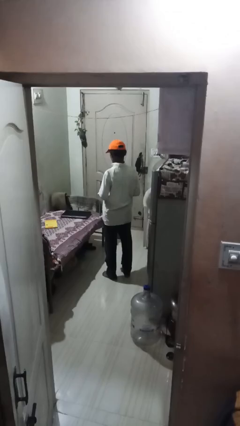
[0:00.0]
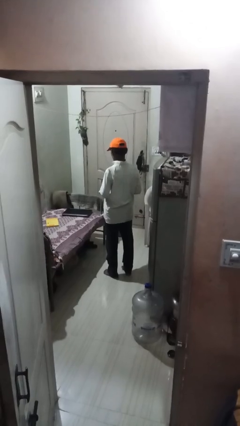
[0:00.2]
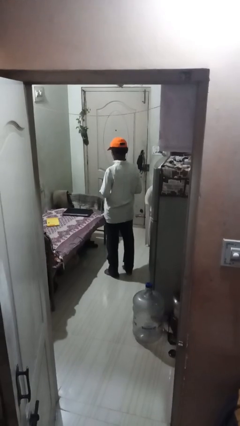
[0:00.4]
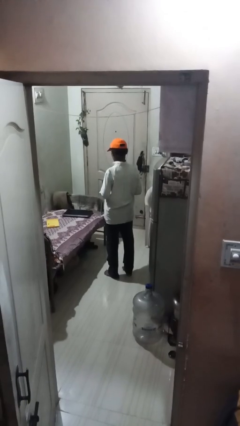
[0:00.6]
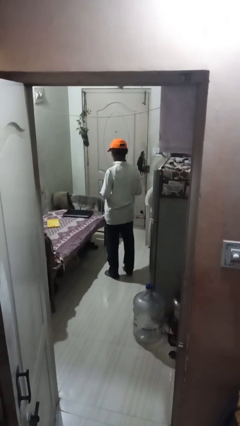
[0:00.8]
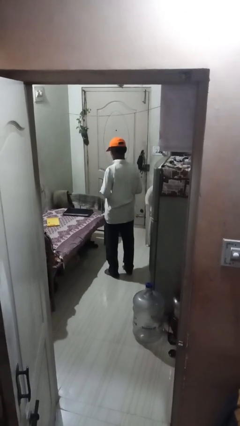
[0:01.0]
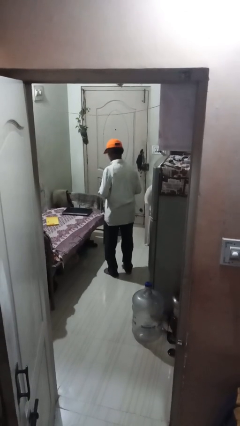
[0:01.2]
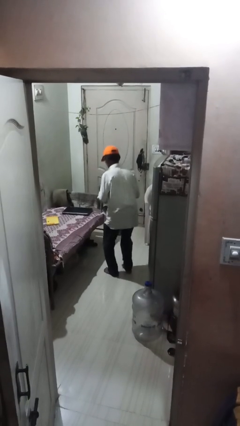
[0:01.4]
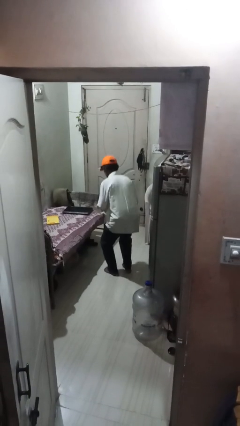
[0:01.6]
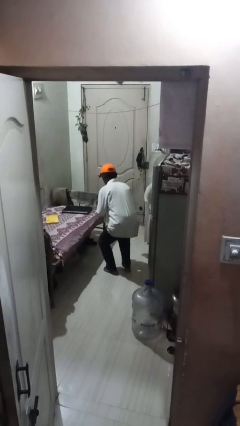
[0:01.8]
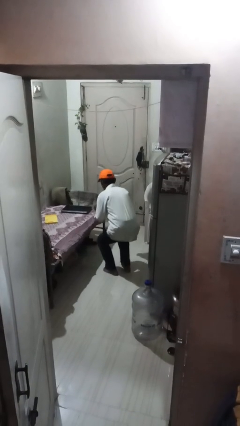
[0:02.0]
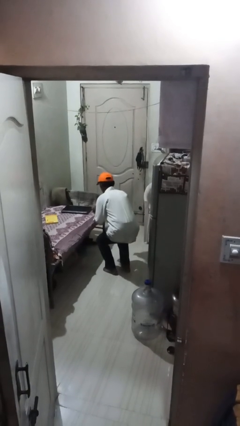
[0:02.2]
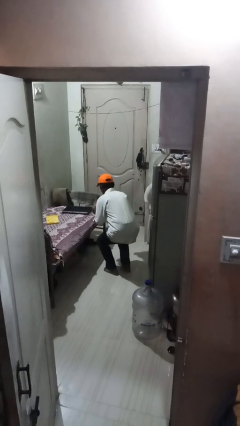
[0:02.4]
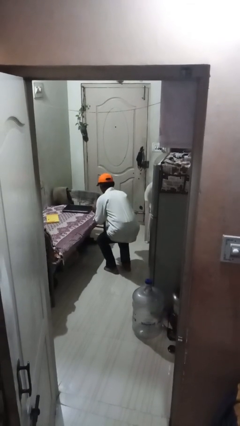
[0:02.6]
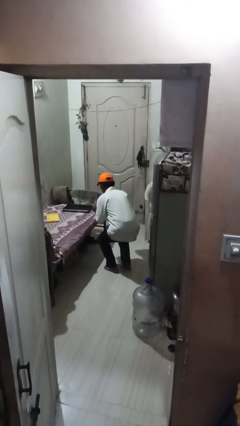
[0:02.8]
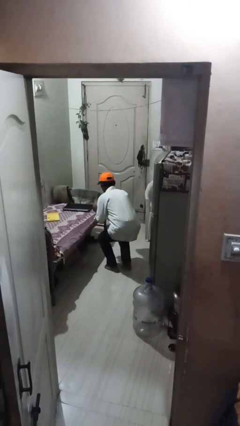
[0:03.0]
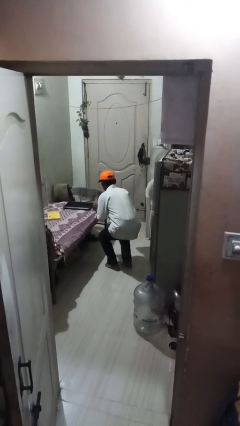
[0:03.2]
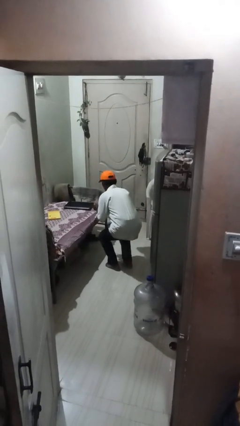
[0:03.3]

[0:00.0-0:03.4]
person squats

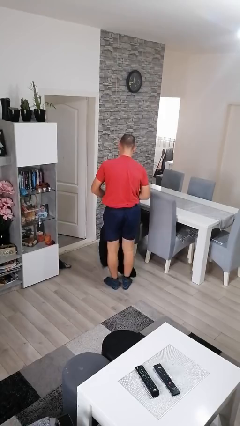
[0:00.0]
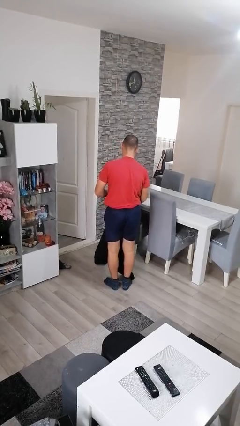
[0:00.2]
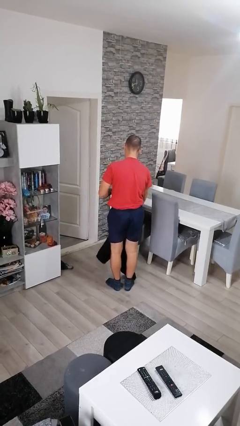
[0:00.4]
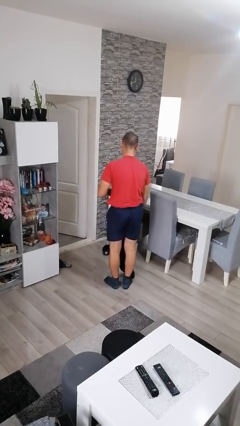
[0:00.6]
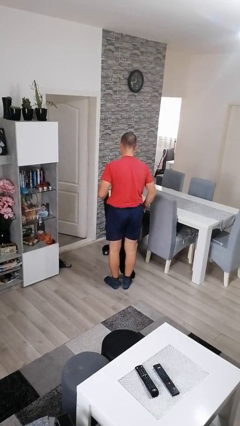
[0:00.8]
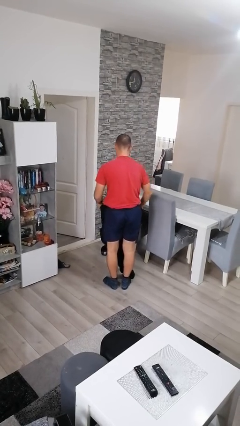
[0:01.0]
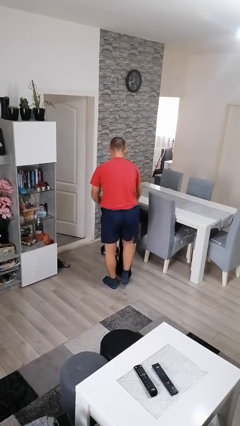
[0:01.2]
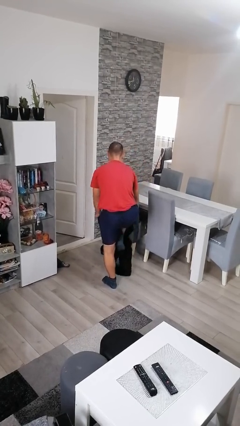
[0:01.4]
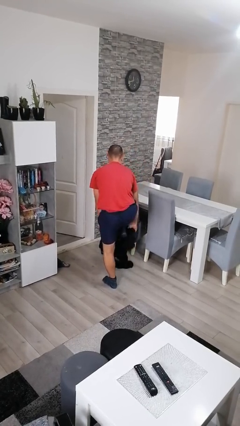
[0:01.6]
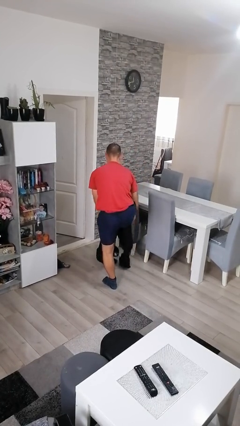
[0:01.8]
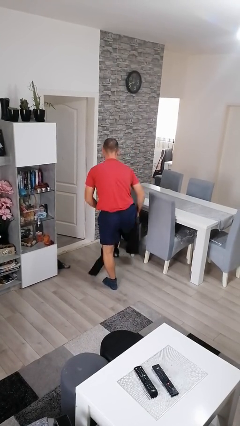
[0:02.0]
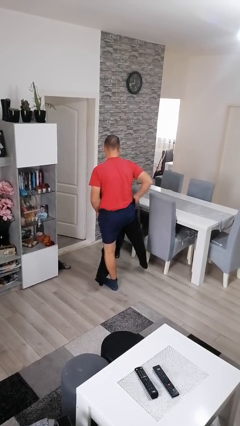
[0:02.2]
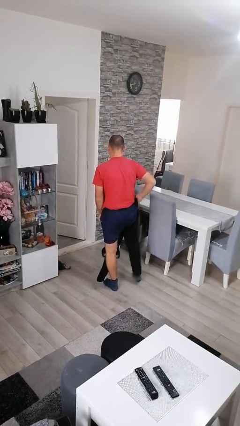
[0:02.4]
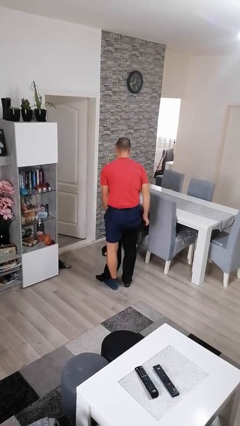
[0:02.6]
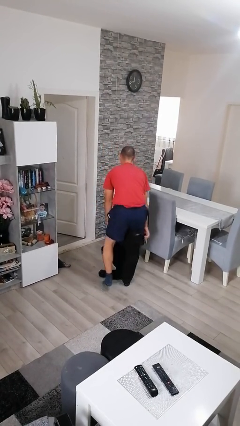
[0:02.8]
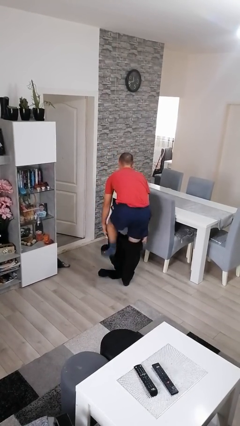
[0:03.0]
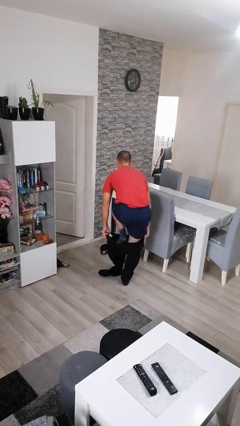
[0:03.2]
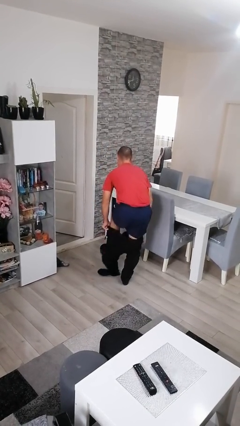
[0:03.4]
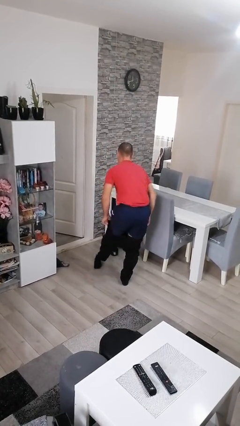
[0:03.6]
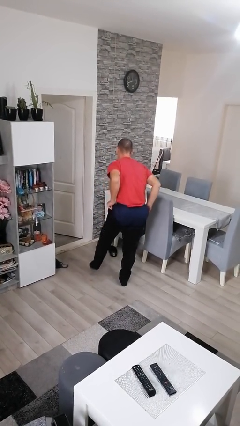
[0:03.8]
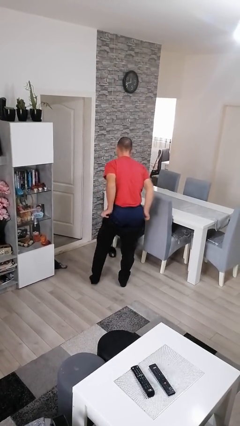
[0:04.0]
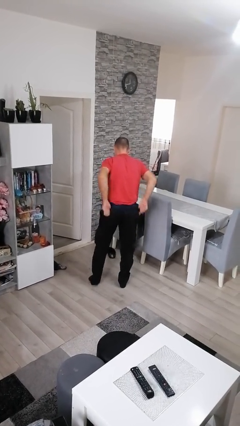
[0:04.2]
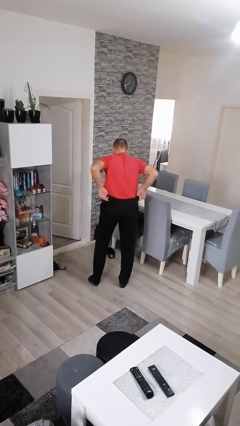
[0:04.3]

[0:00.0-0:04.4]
person puts on pants

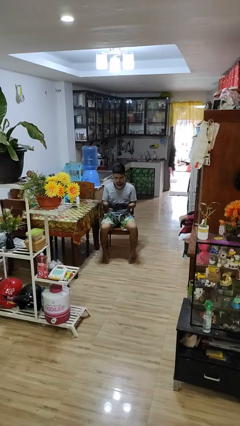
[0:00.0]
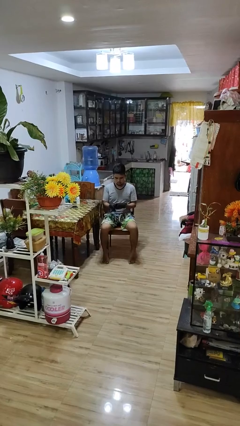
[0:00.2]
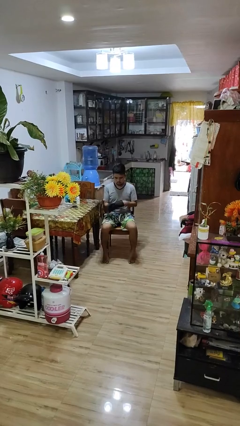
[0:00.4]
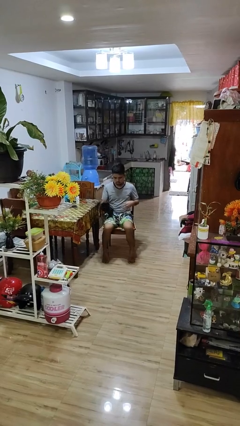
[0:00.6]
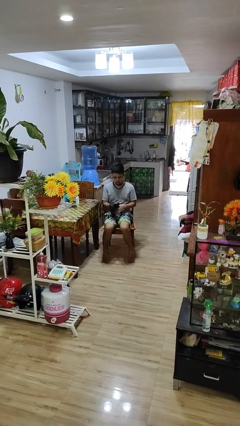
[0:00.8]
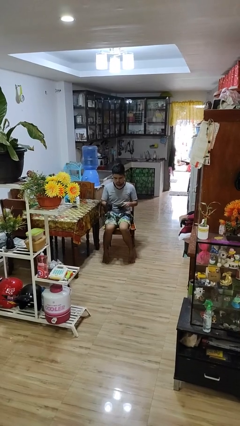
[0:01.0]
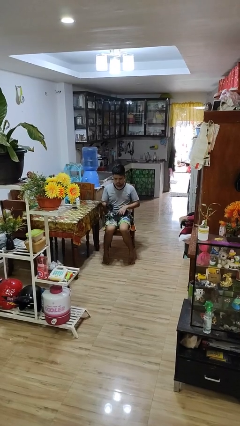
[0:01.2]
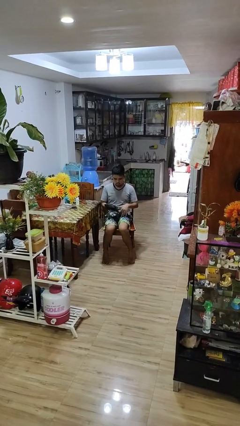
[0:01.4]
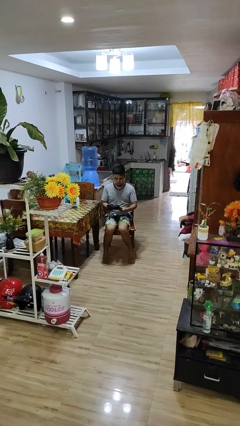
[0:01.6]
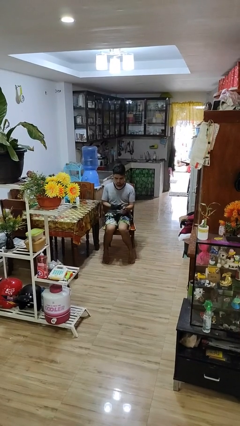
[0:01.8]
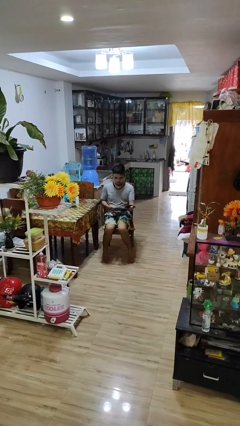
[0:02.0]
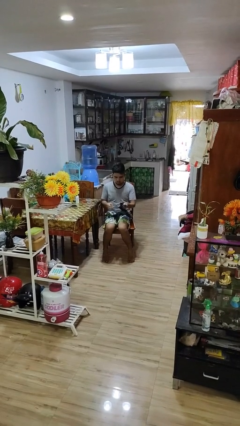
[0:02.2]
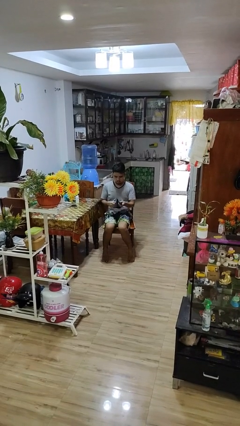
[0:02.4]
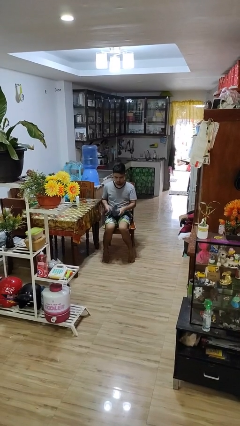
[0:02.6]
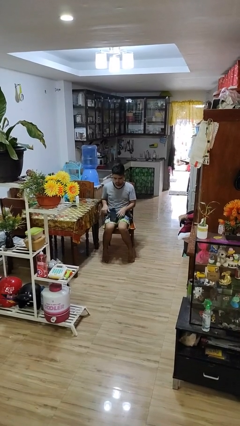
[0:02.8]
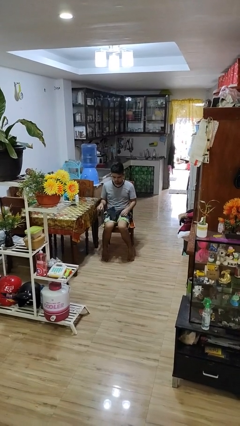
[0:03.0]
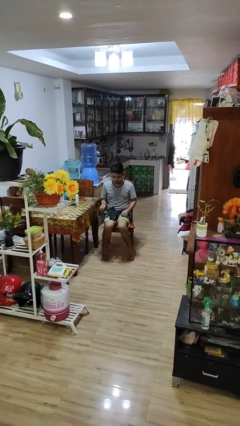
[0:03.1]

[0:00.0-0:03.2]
person takes off gloves

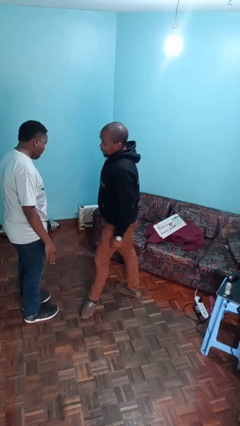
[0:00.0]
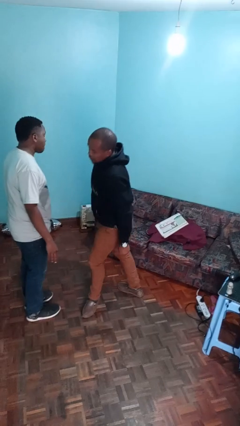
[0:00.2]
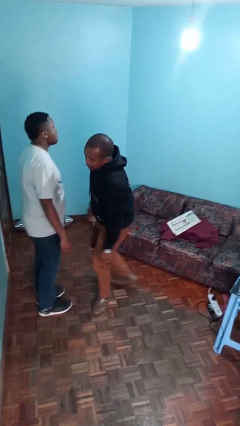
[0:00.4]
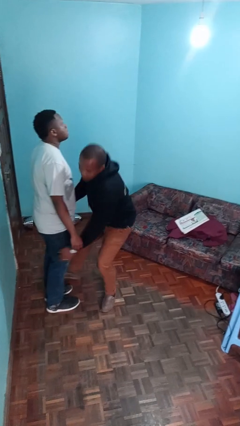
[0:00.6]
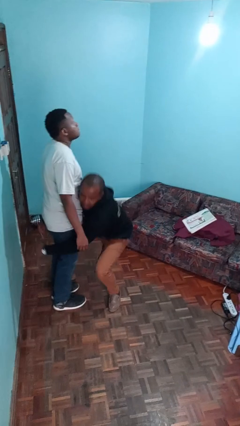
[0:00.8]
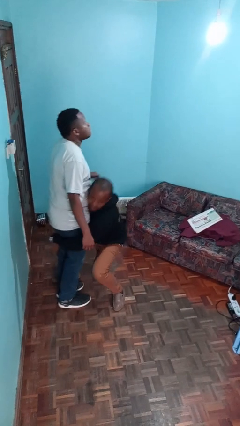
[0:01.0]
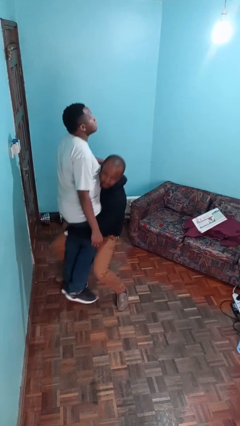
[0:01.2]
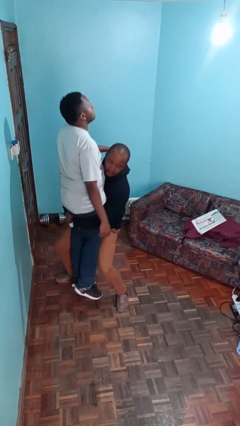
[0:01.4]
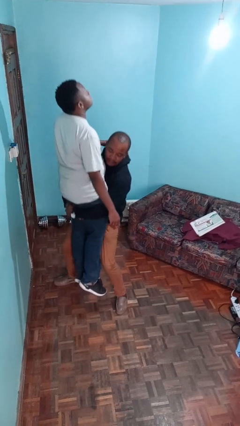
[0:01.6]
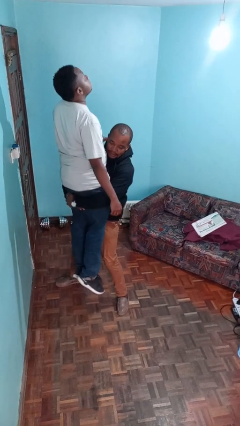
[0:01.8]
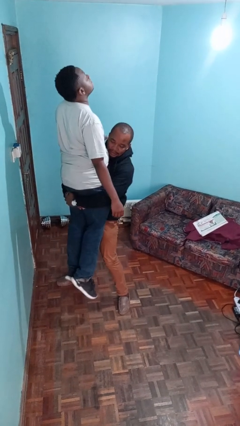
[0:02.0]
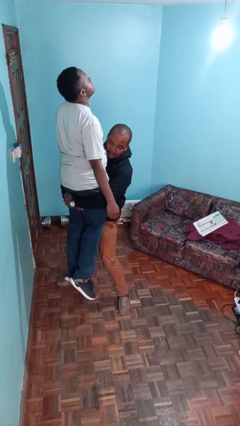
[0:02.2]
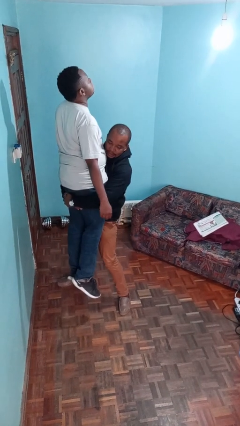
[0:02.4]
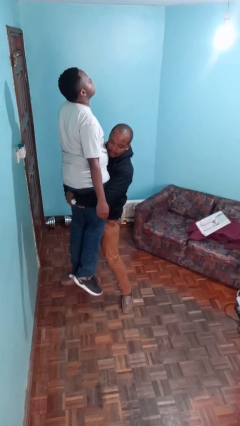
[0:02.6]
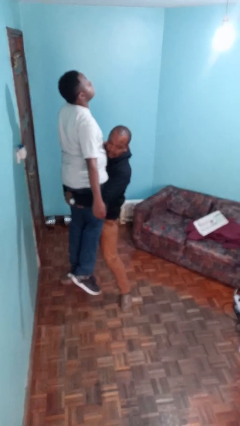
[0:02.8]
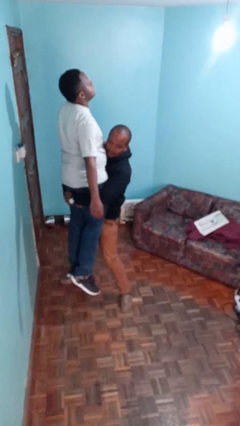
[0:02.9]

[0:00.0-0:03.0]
person picks up person

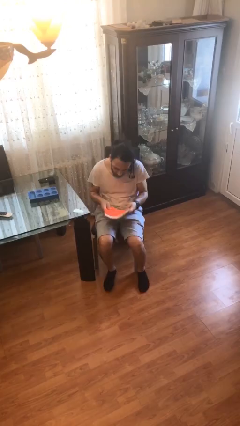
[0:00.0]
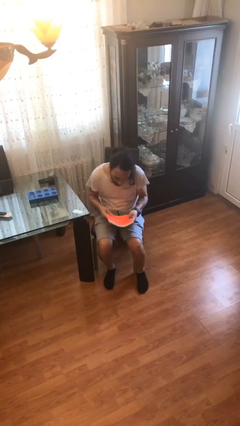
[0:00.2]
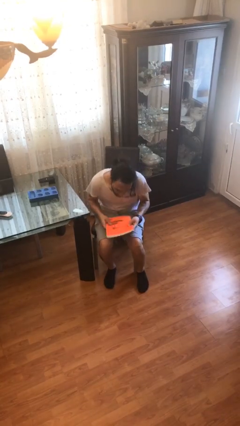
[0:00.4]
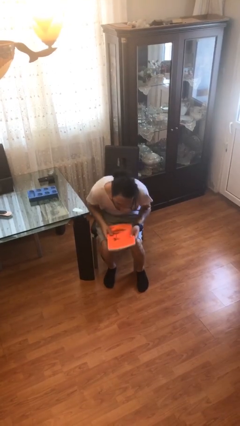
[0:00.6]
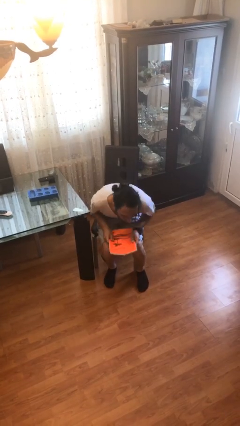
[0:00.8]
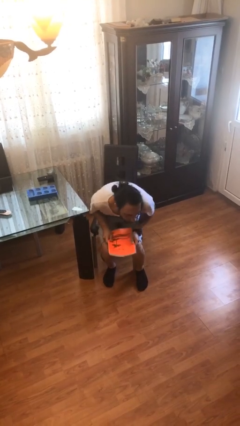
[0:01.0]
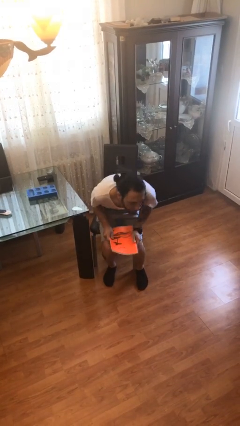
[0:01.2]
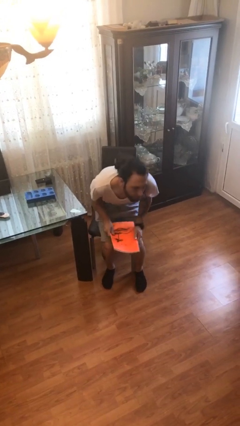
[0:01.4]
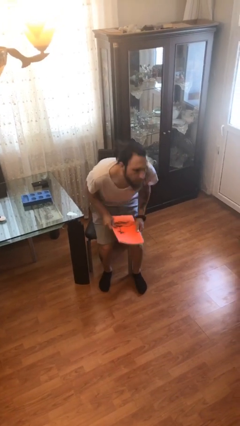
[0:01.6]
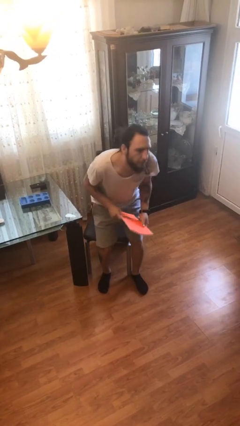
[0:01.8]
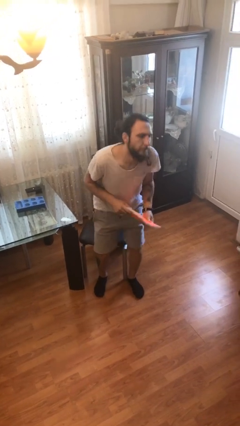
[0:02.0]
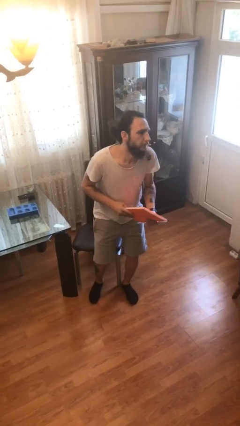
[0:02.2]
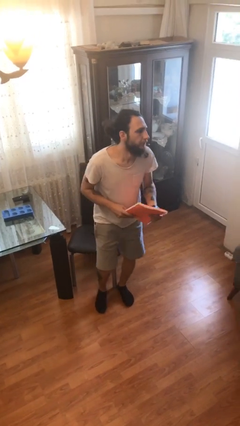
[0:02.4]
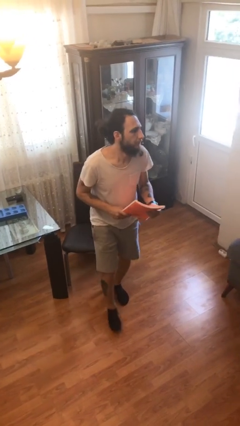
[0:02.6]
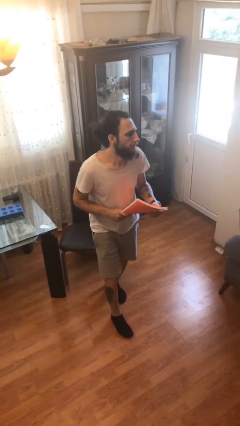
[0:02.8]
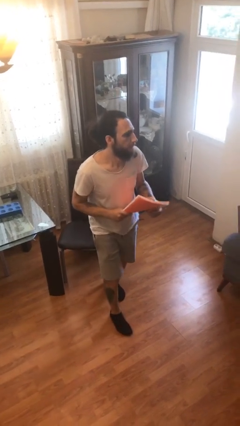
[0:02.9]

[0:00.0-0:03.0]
person stands up

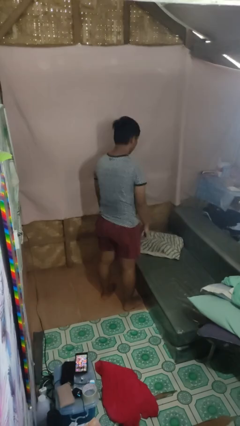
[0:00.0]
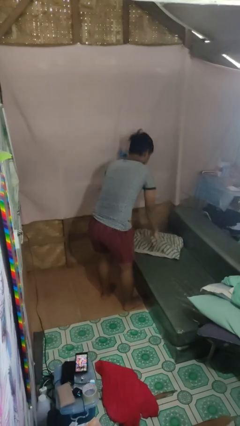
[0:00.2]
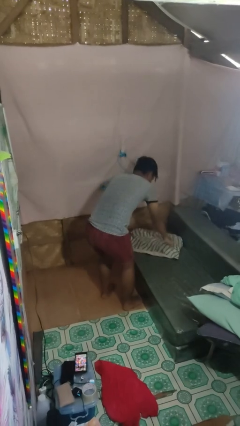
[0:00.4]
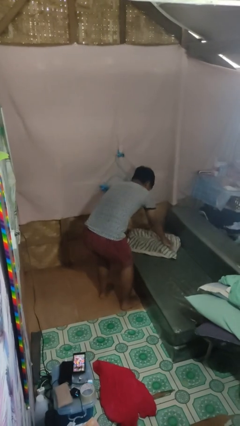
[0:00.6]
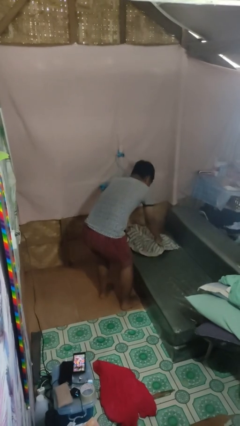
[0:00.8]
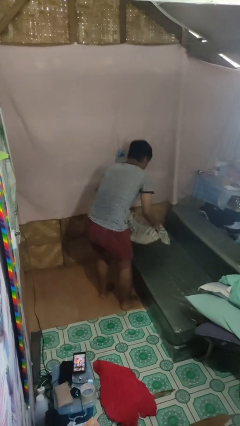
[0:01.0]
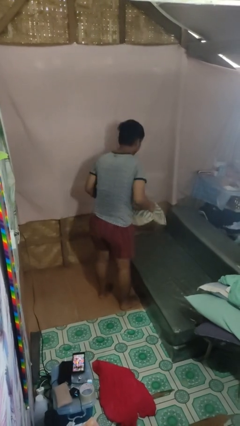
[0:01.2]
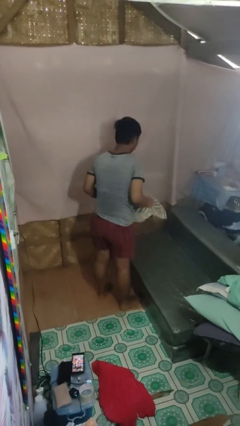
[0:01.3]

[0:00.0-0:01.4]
person picks up object from couch
